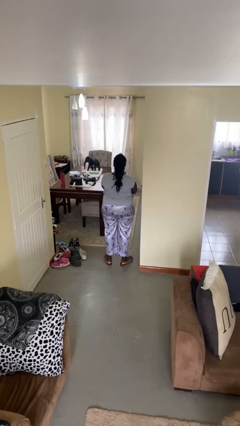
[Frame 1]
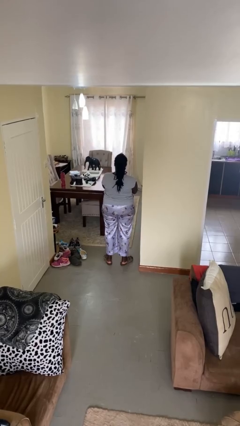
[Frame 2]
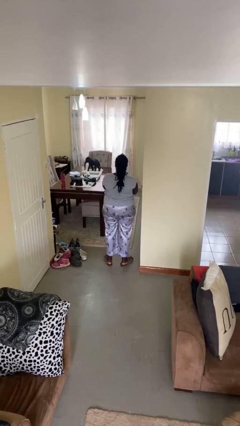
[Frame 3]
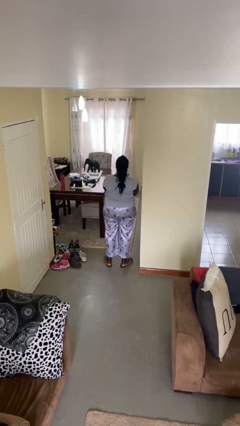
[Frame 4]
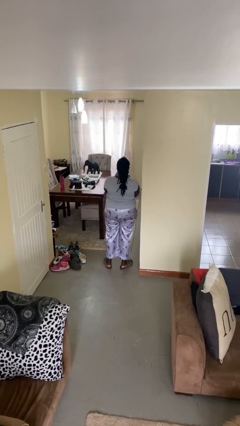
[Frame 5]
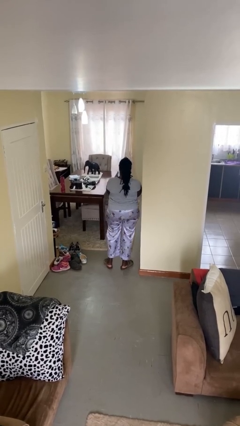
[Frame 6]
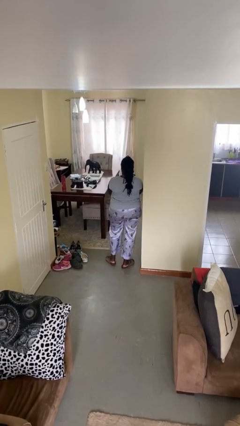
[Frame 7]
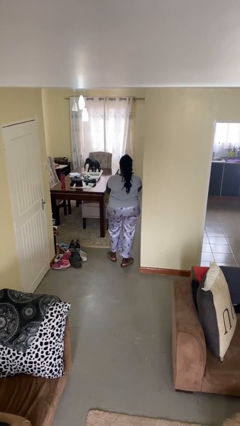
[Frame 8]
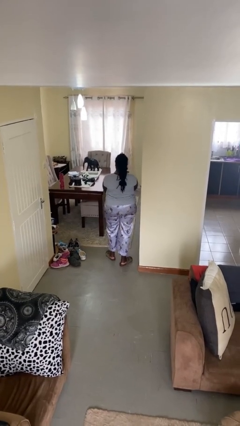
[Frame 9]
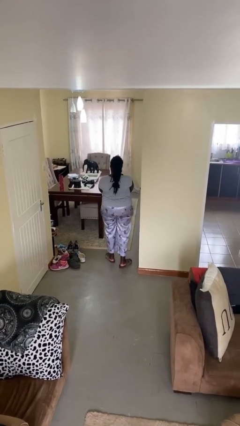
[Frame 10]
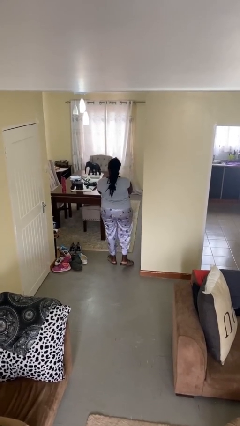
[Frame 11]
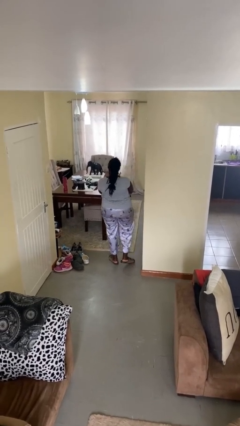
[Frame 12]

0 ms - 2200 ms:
person carries laundry basket

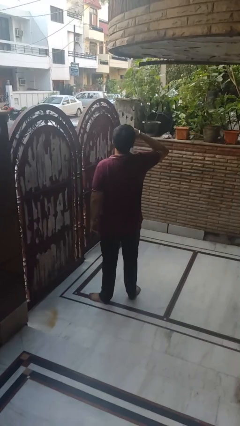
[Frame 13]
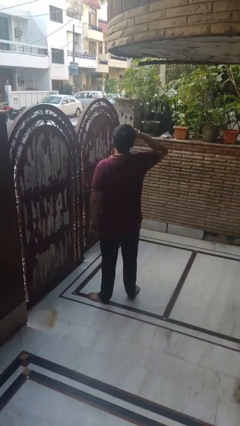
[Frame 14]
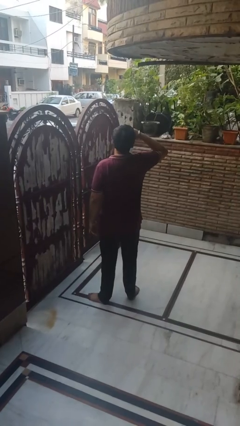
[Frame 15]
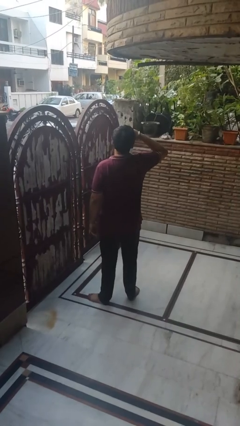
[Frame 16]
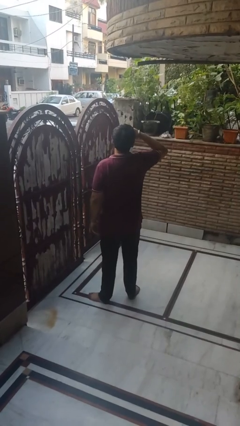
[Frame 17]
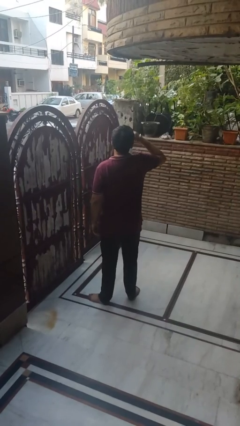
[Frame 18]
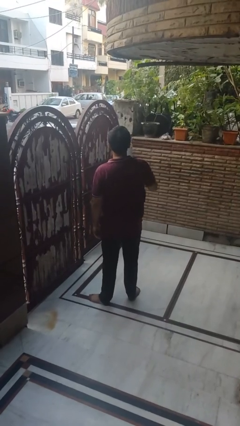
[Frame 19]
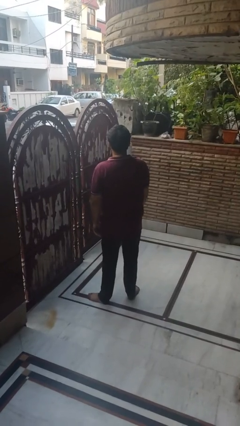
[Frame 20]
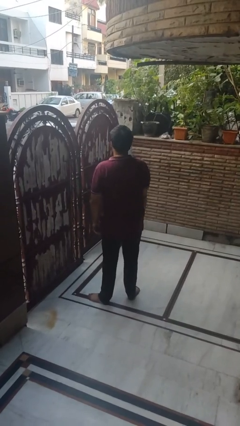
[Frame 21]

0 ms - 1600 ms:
person shades eyes

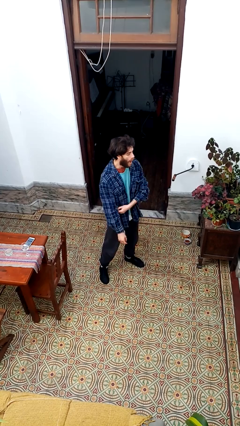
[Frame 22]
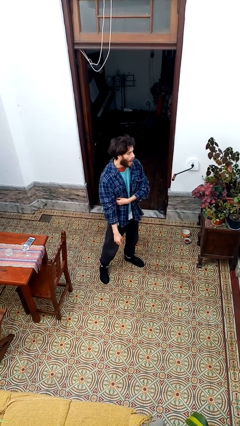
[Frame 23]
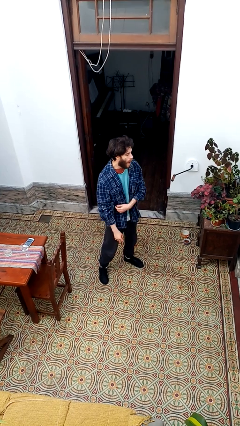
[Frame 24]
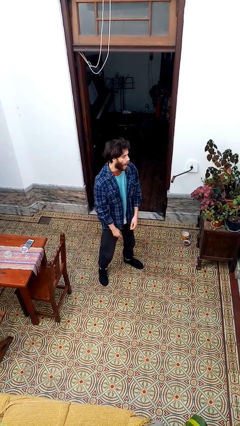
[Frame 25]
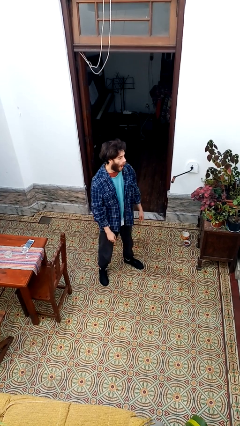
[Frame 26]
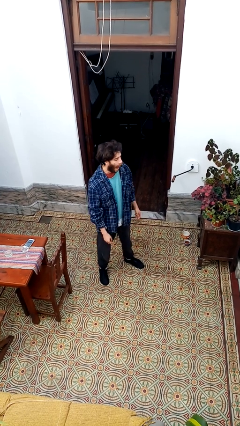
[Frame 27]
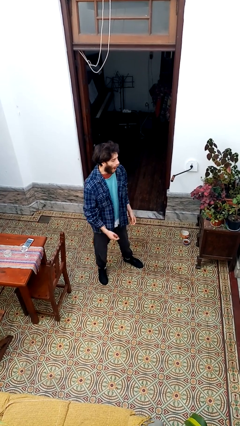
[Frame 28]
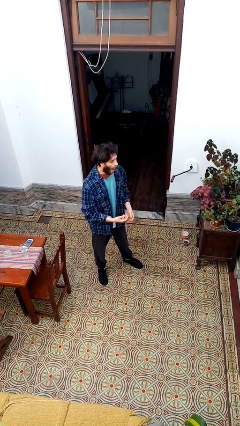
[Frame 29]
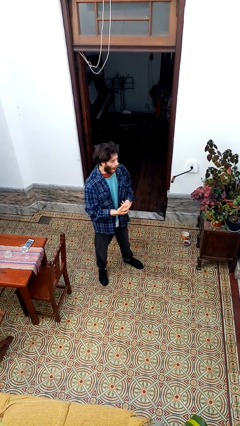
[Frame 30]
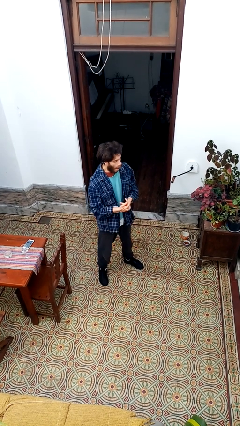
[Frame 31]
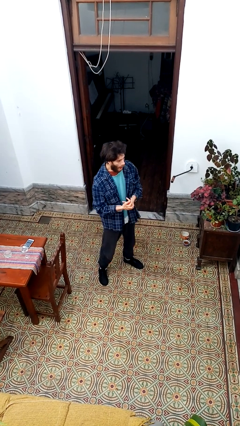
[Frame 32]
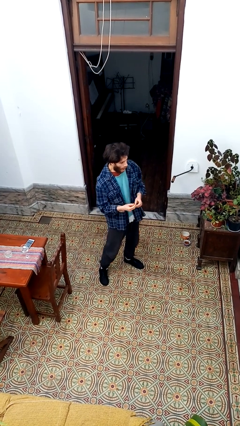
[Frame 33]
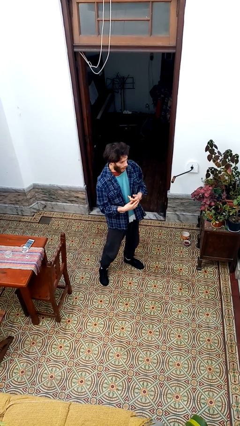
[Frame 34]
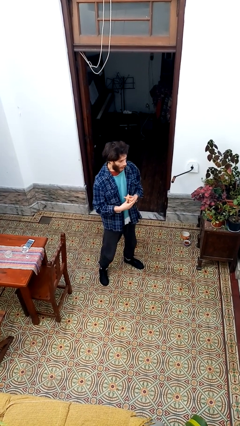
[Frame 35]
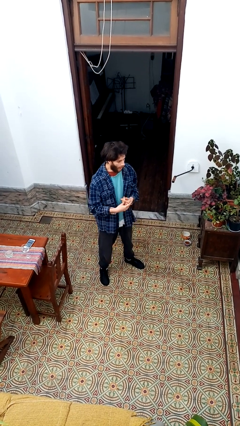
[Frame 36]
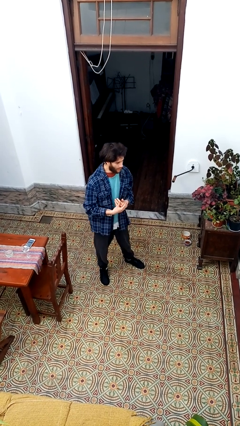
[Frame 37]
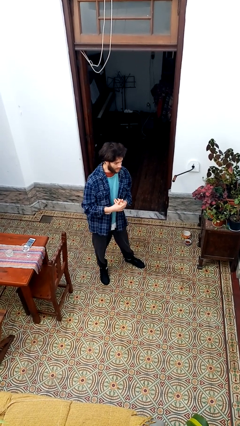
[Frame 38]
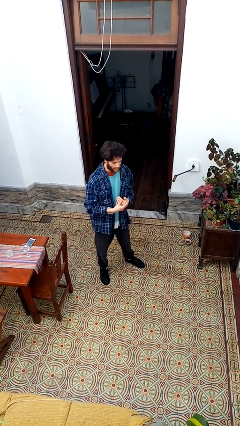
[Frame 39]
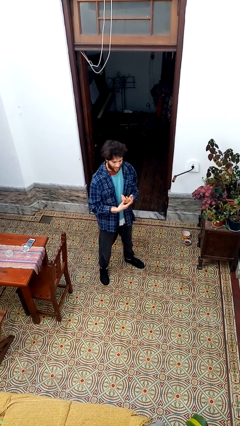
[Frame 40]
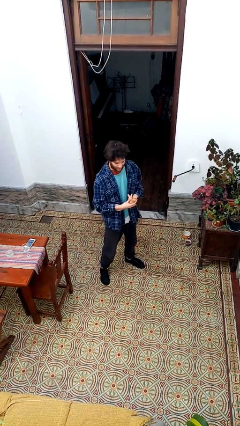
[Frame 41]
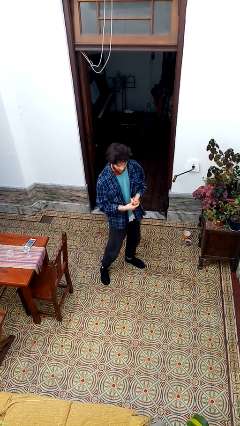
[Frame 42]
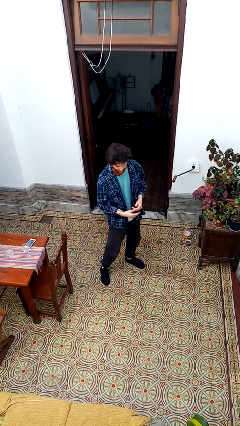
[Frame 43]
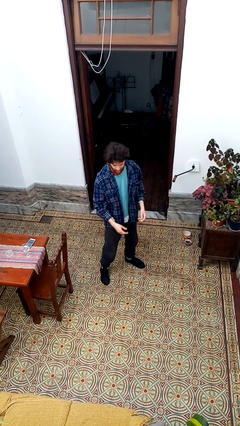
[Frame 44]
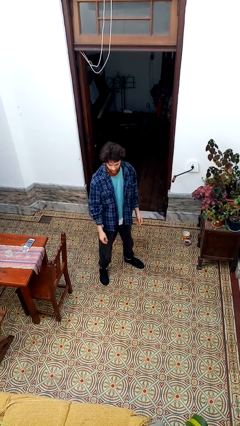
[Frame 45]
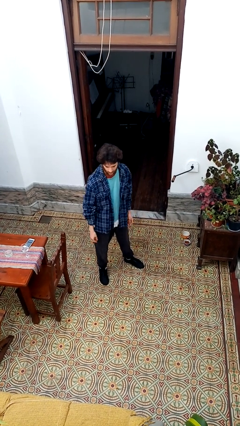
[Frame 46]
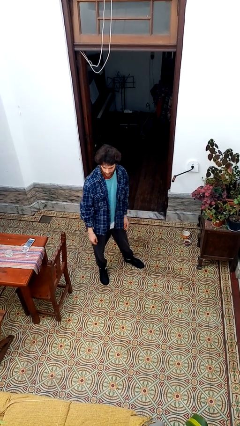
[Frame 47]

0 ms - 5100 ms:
person cracks knuckles

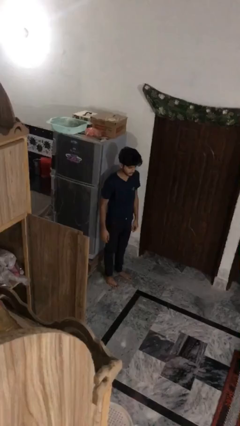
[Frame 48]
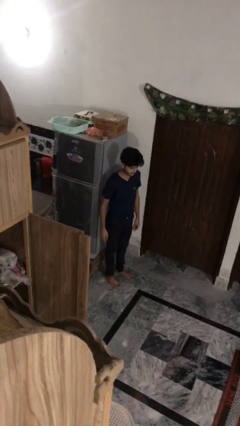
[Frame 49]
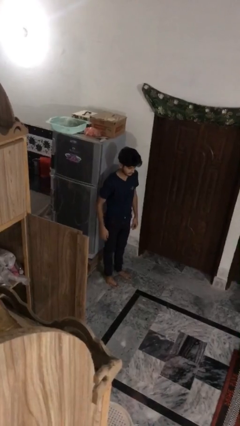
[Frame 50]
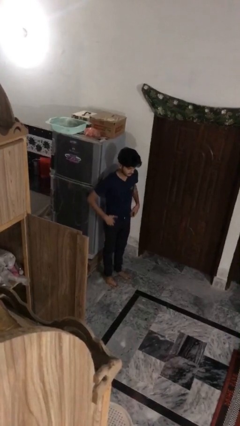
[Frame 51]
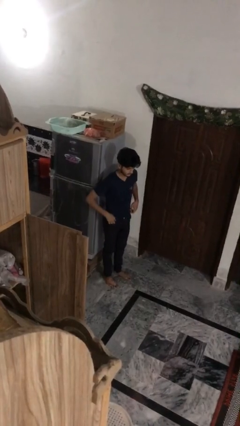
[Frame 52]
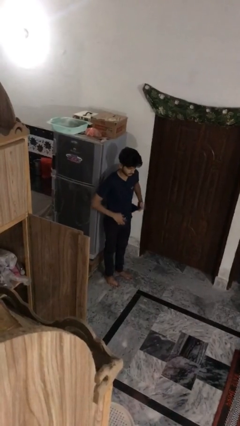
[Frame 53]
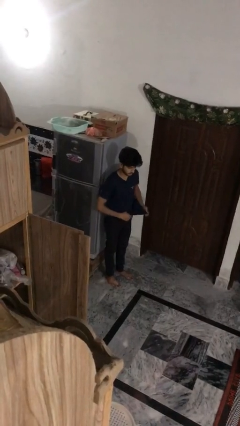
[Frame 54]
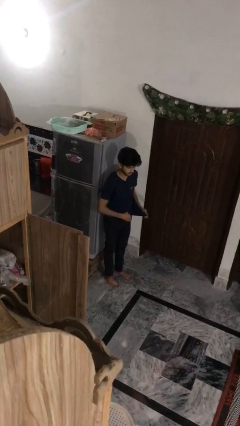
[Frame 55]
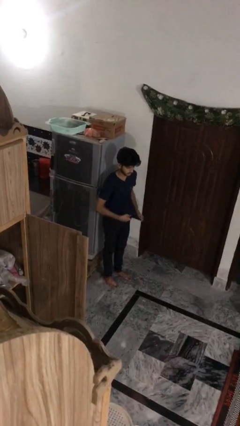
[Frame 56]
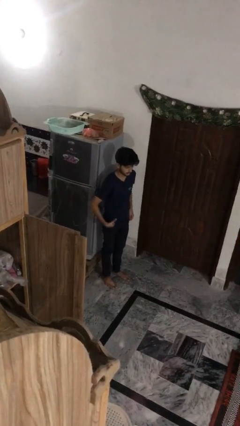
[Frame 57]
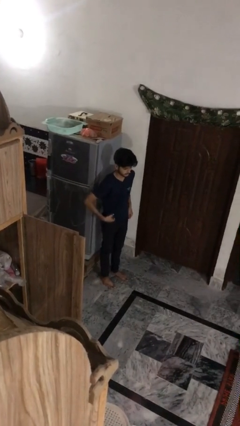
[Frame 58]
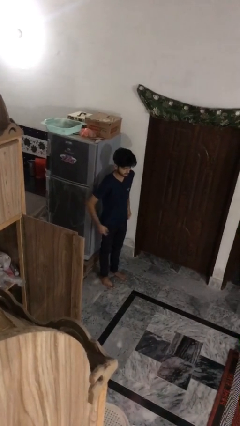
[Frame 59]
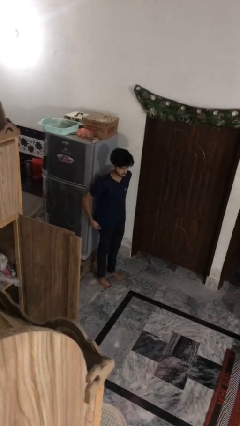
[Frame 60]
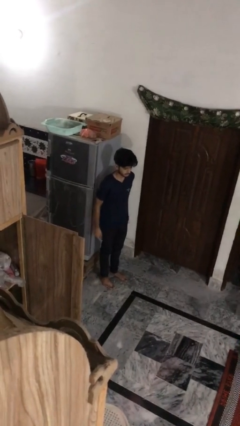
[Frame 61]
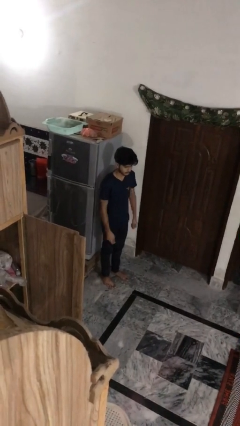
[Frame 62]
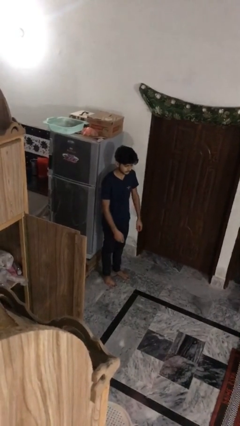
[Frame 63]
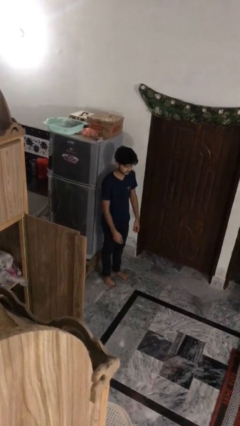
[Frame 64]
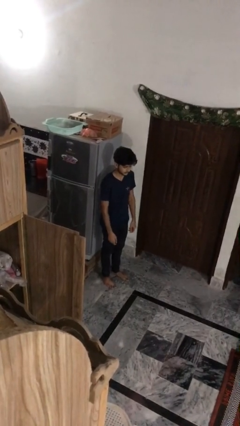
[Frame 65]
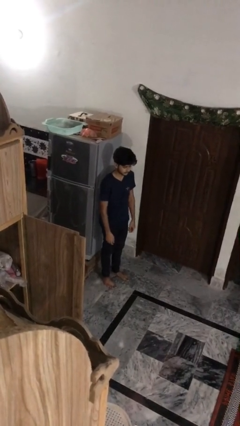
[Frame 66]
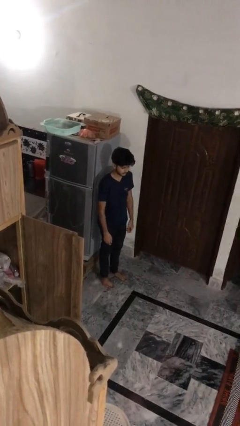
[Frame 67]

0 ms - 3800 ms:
person untucks shirt

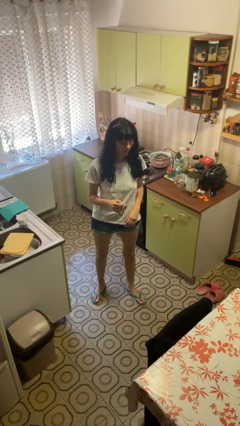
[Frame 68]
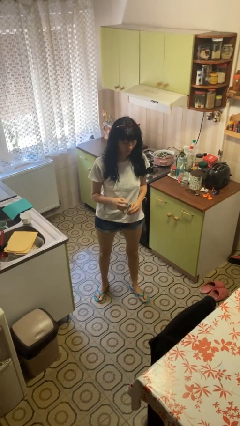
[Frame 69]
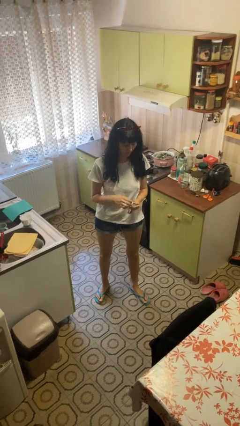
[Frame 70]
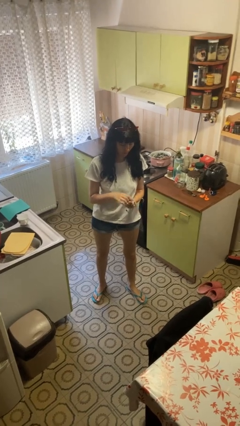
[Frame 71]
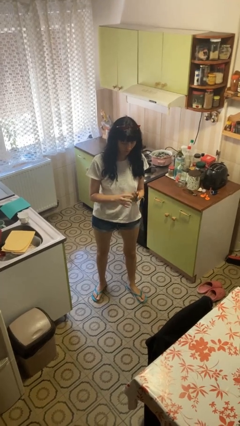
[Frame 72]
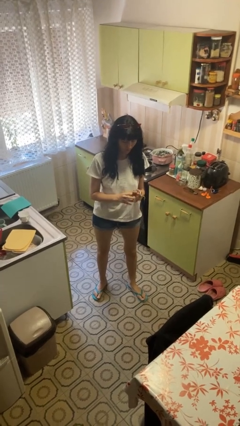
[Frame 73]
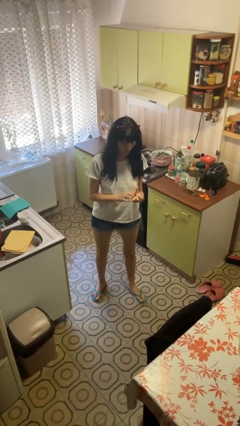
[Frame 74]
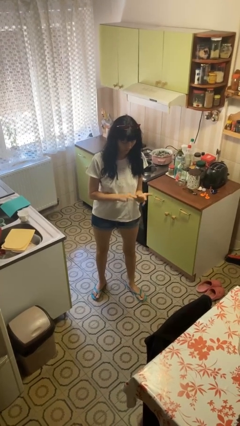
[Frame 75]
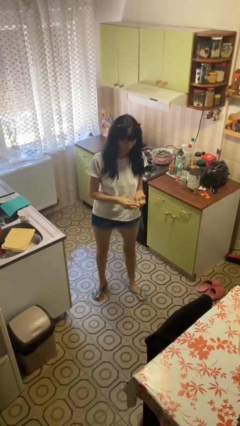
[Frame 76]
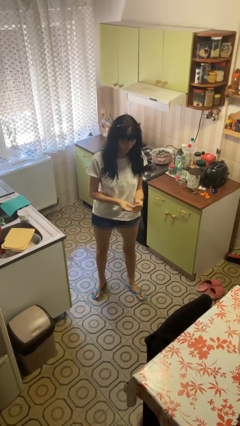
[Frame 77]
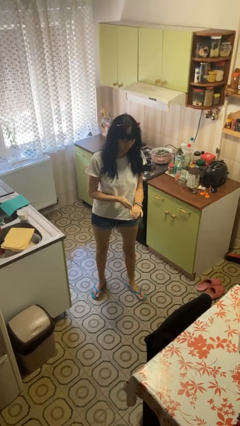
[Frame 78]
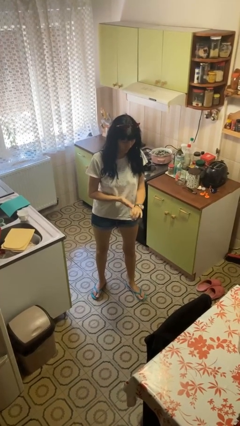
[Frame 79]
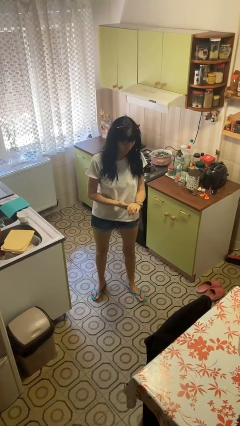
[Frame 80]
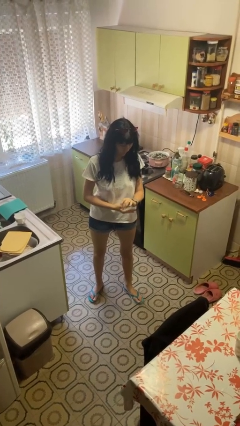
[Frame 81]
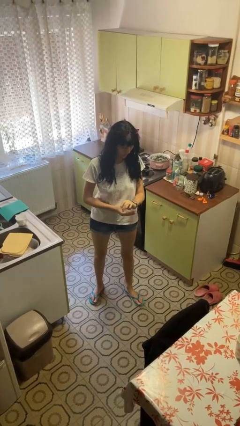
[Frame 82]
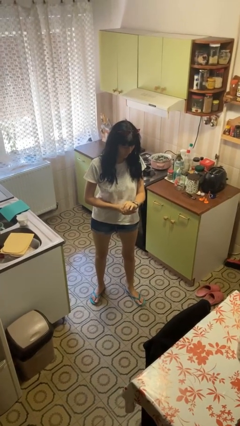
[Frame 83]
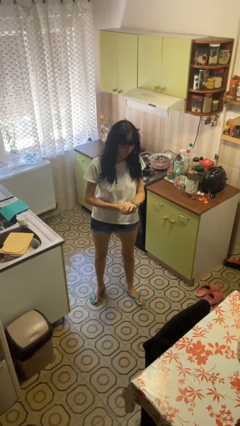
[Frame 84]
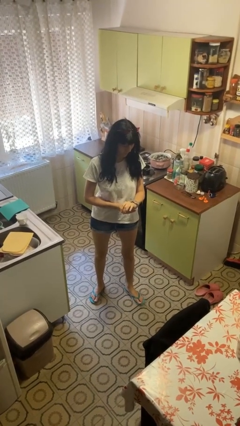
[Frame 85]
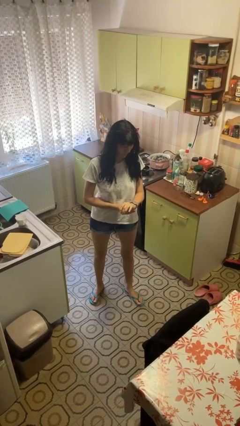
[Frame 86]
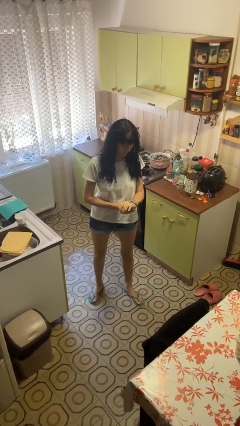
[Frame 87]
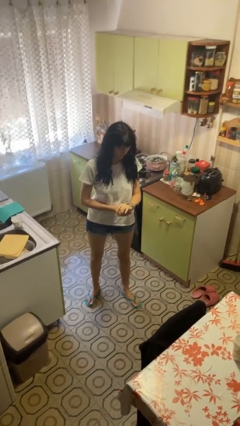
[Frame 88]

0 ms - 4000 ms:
person puts on wristwatch

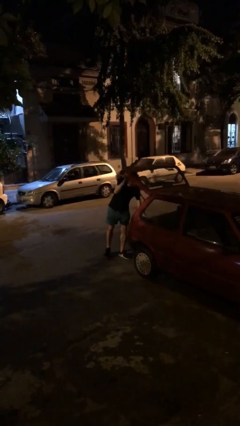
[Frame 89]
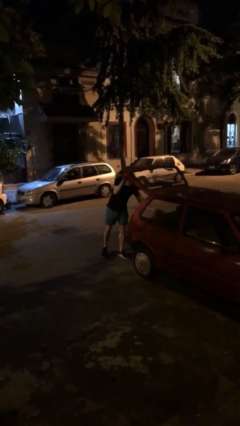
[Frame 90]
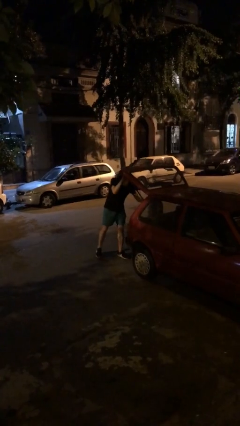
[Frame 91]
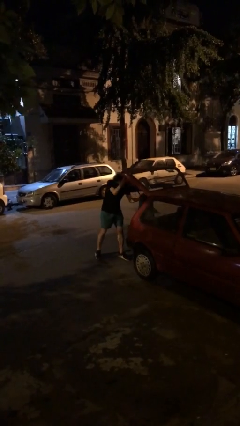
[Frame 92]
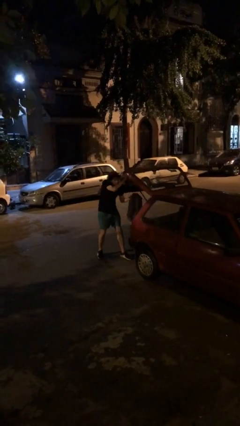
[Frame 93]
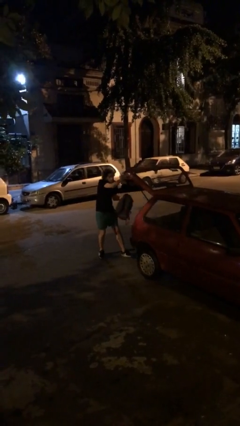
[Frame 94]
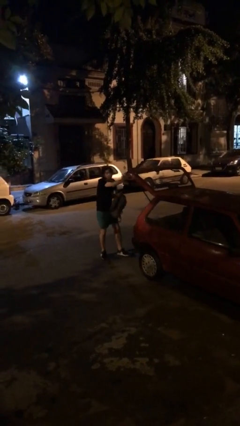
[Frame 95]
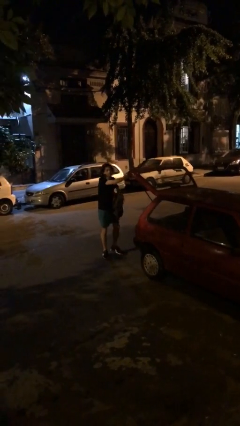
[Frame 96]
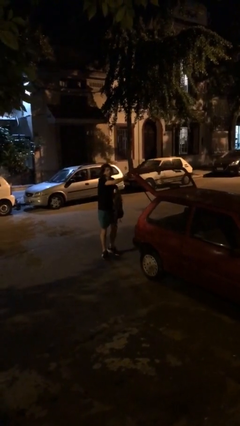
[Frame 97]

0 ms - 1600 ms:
person unloads car
